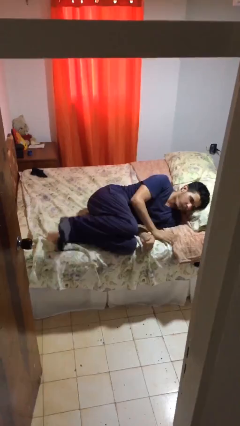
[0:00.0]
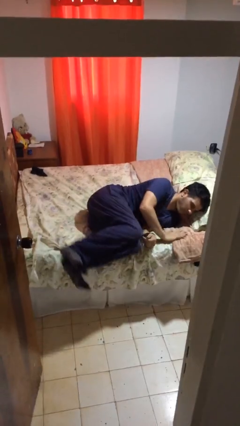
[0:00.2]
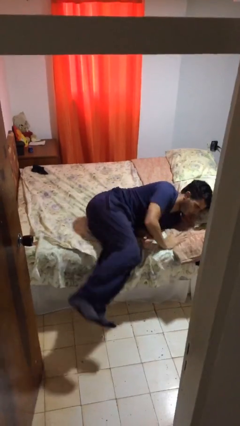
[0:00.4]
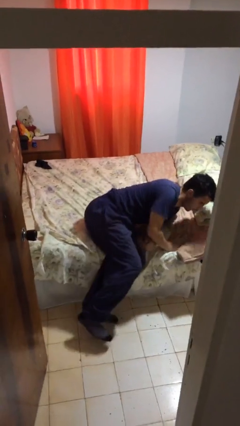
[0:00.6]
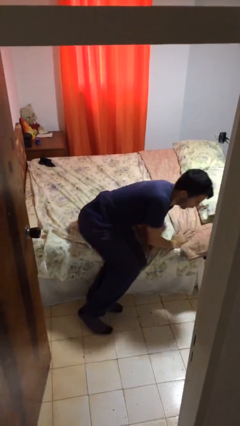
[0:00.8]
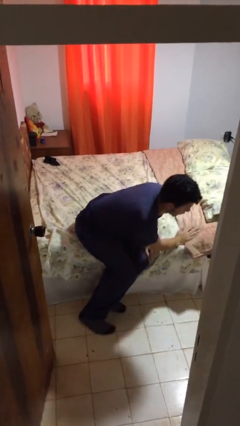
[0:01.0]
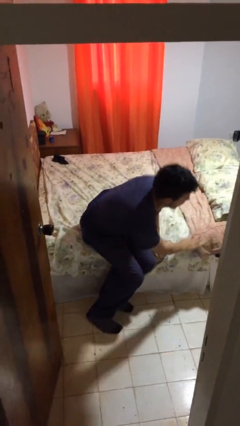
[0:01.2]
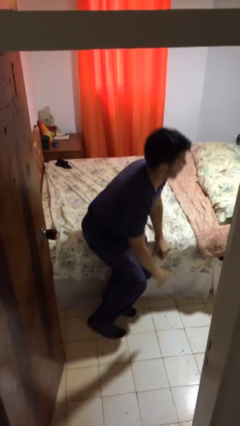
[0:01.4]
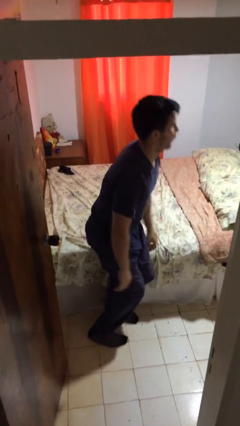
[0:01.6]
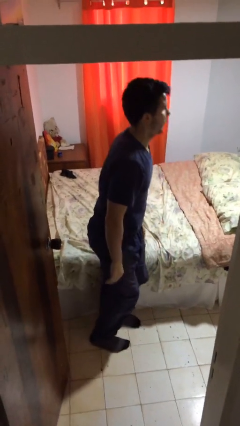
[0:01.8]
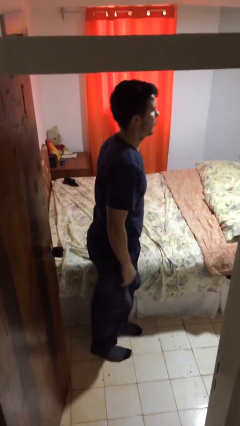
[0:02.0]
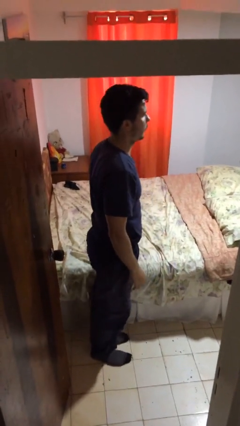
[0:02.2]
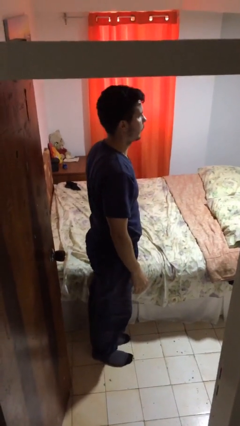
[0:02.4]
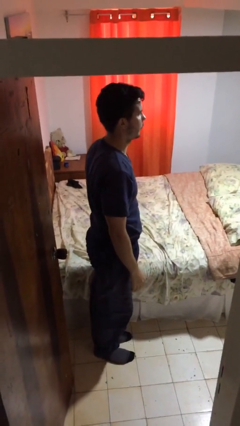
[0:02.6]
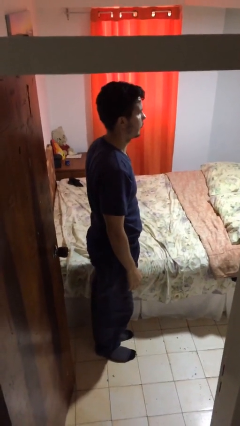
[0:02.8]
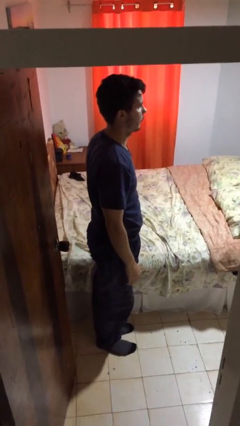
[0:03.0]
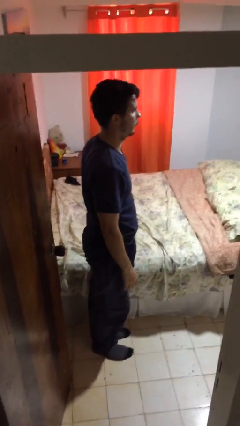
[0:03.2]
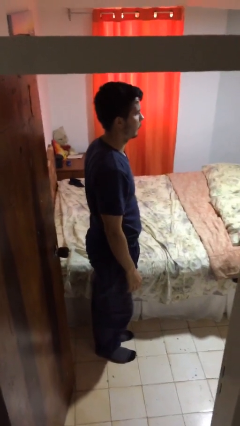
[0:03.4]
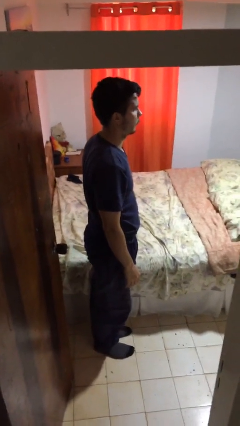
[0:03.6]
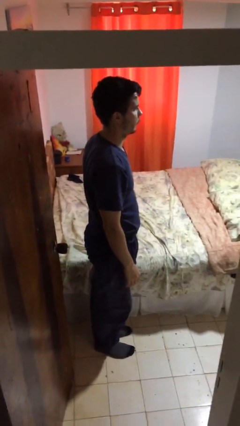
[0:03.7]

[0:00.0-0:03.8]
person stands up

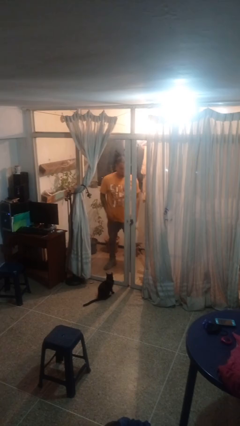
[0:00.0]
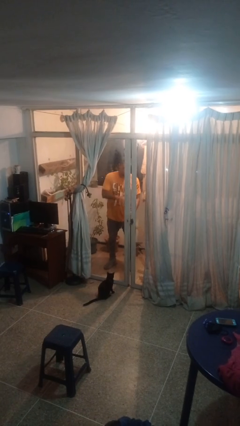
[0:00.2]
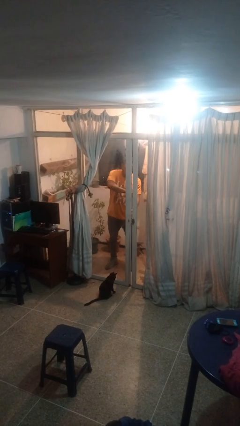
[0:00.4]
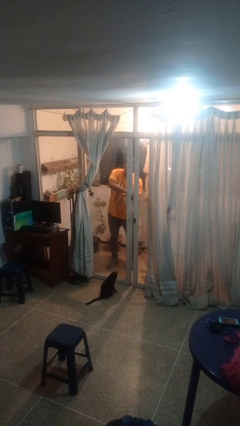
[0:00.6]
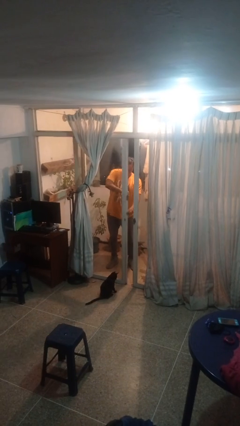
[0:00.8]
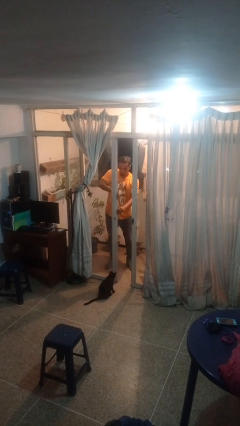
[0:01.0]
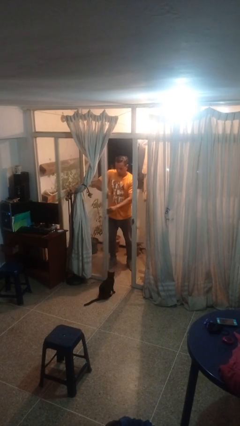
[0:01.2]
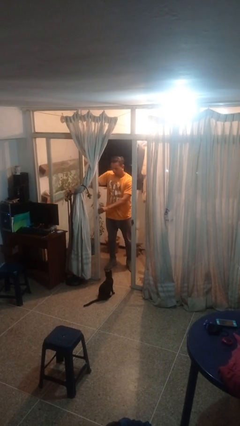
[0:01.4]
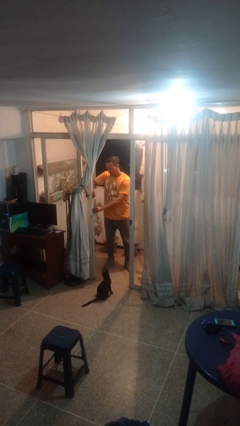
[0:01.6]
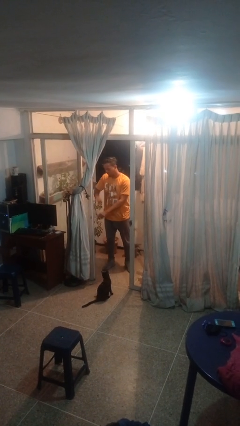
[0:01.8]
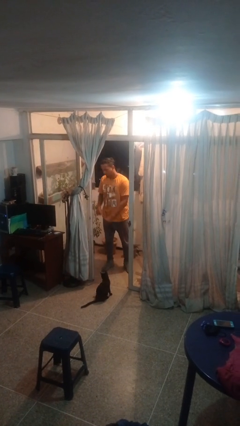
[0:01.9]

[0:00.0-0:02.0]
person opens sliding door

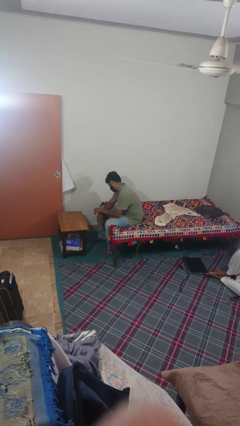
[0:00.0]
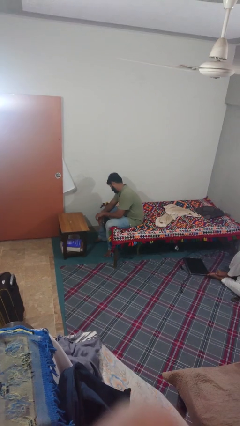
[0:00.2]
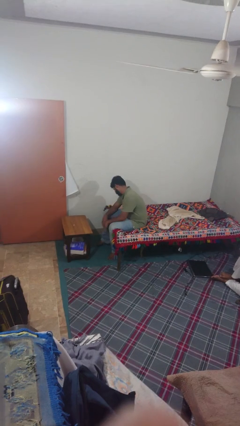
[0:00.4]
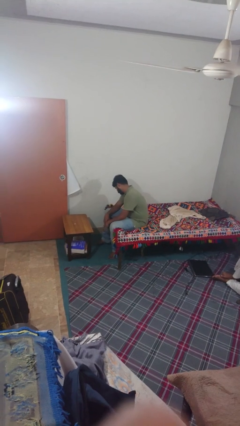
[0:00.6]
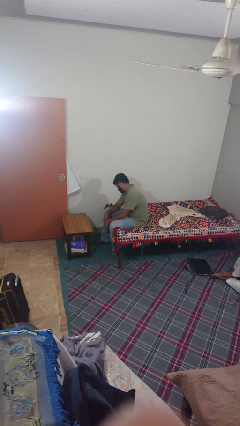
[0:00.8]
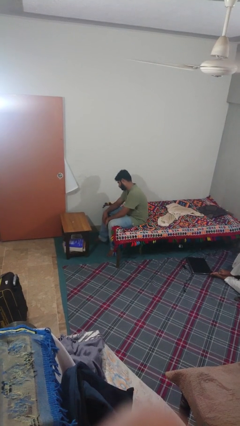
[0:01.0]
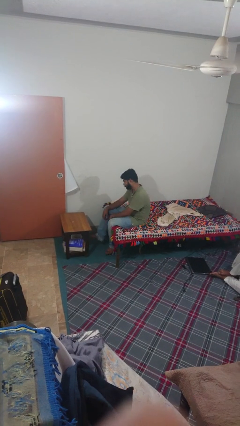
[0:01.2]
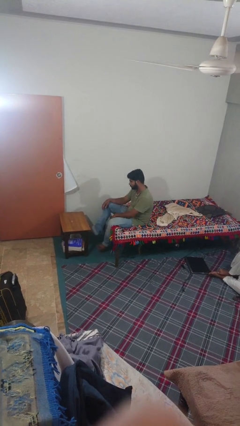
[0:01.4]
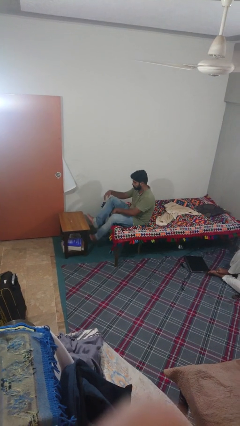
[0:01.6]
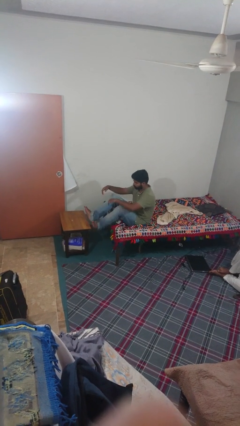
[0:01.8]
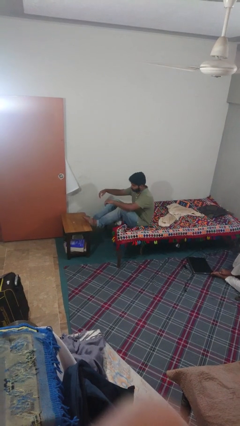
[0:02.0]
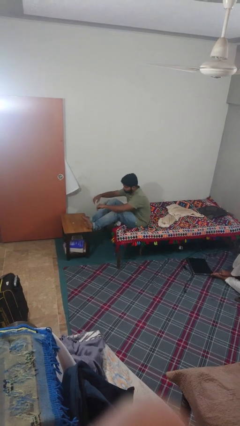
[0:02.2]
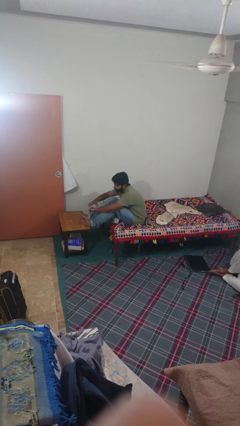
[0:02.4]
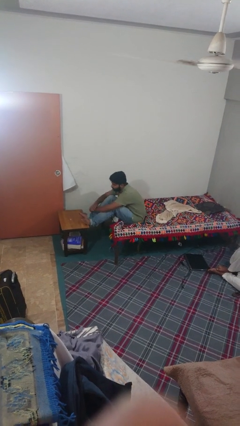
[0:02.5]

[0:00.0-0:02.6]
person puts feet up

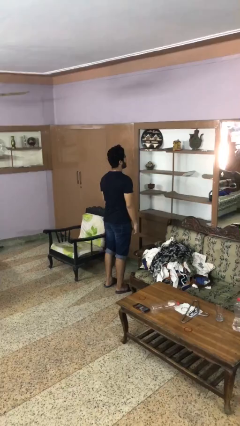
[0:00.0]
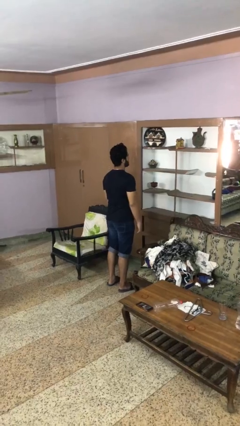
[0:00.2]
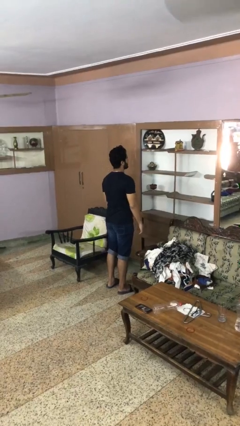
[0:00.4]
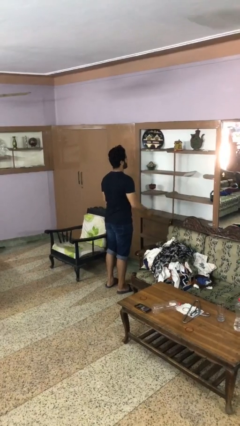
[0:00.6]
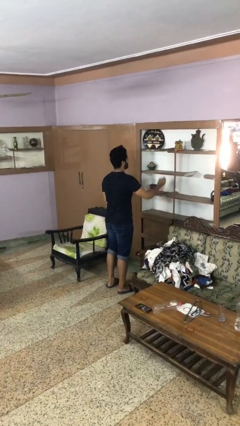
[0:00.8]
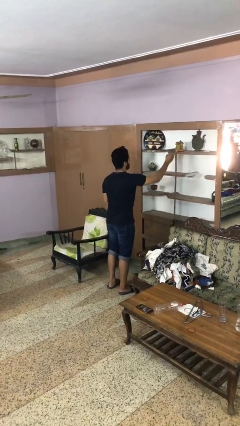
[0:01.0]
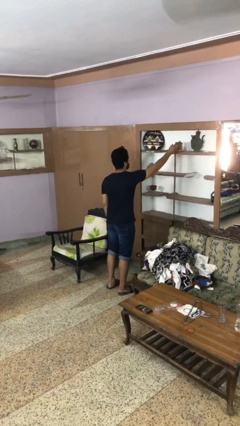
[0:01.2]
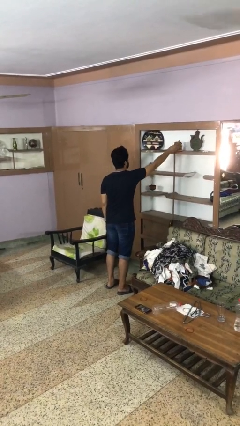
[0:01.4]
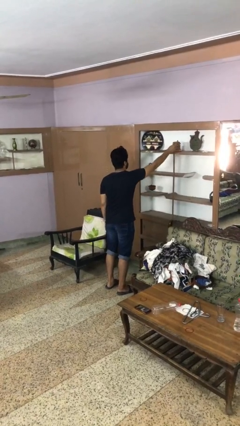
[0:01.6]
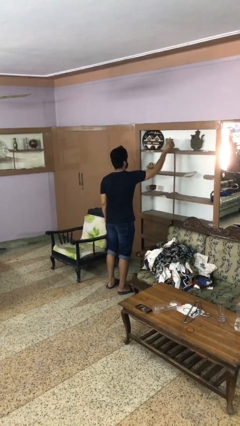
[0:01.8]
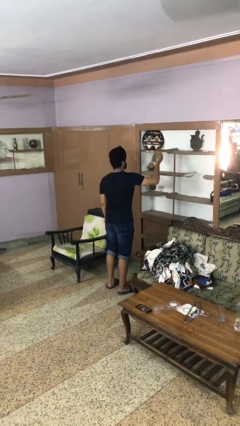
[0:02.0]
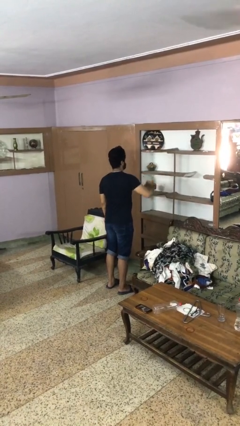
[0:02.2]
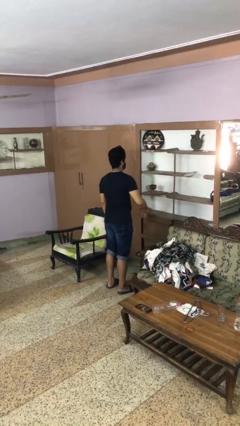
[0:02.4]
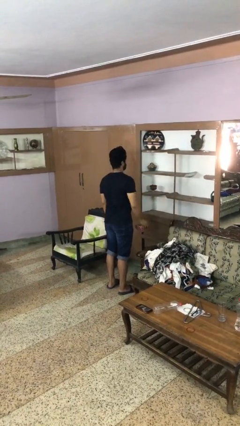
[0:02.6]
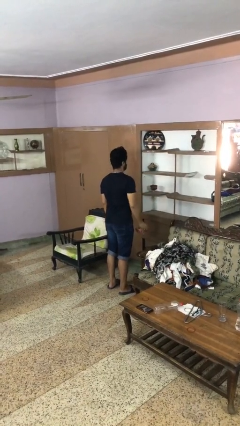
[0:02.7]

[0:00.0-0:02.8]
person picks up object from shelf

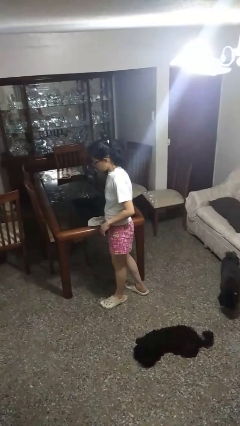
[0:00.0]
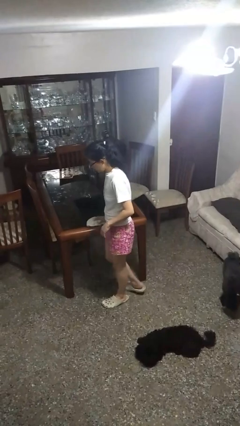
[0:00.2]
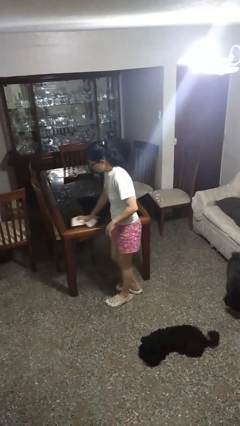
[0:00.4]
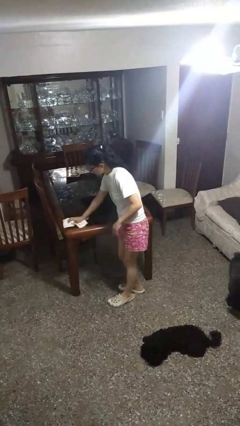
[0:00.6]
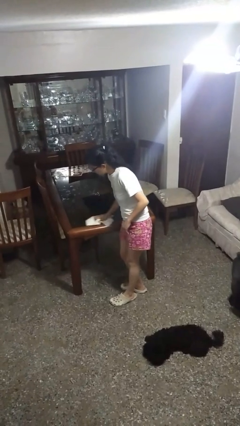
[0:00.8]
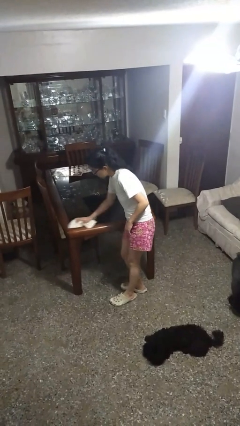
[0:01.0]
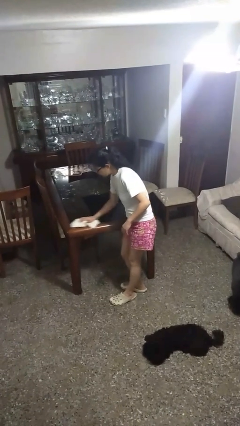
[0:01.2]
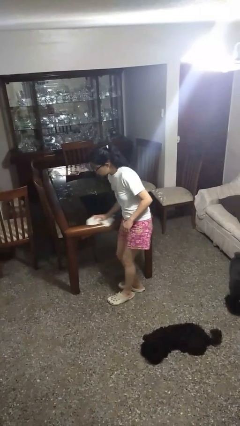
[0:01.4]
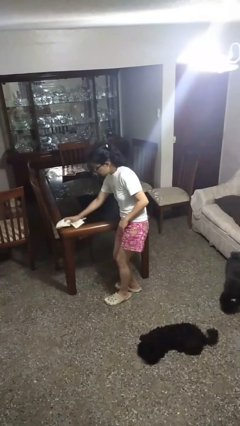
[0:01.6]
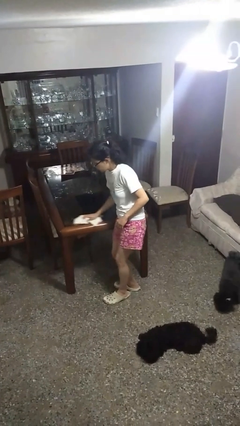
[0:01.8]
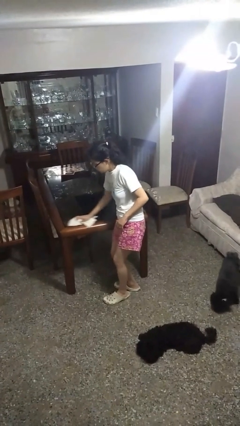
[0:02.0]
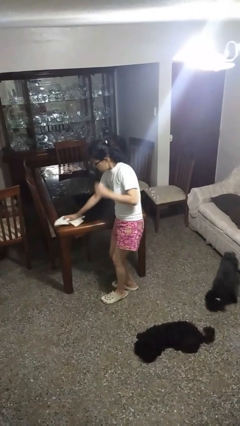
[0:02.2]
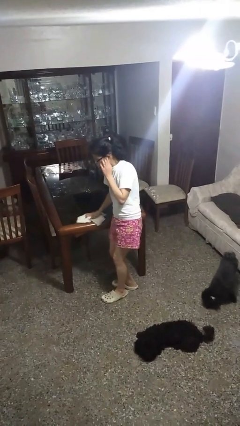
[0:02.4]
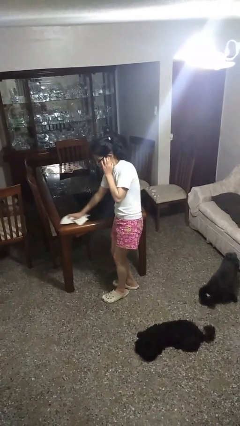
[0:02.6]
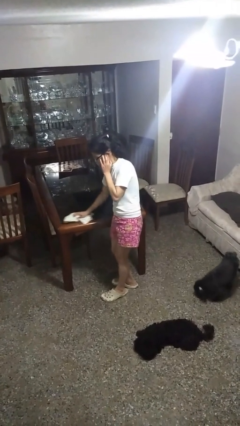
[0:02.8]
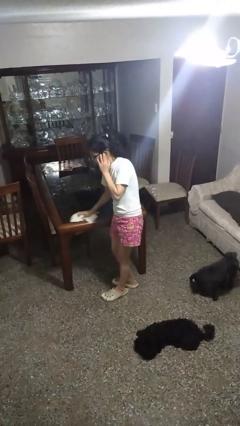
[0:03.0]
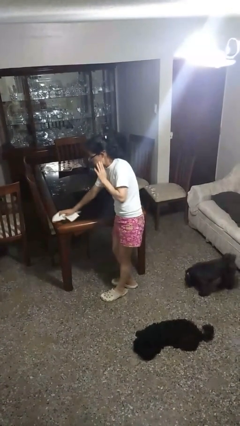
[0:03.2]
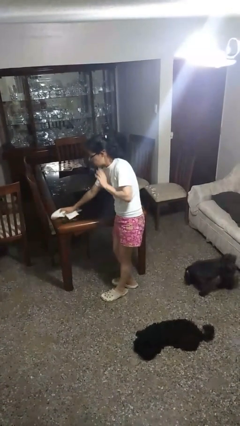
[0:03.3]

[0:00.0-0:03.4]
person cleans table with rag

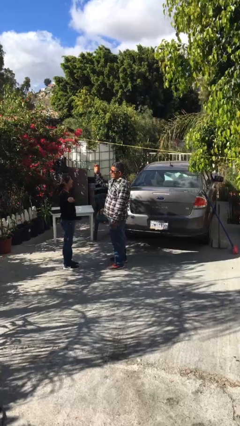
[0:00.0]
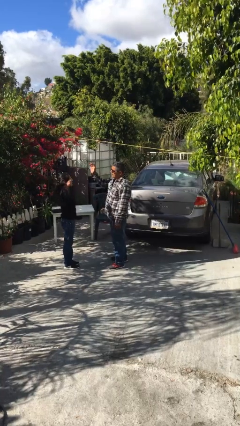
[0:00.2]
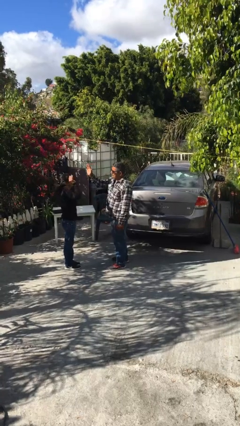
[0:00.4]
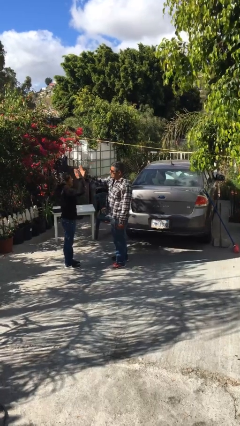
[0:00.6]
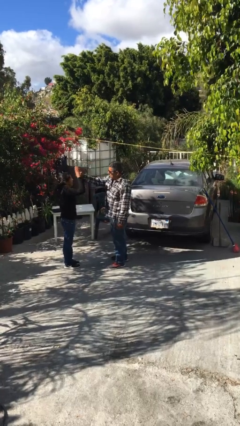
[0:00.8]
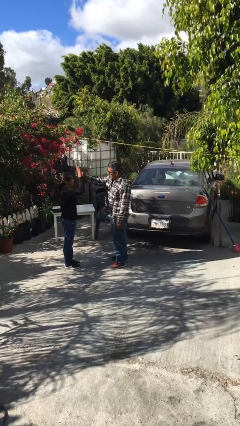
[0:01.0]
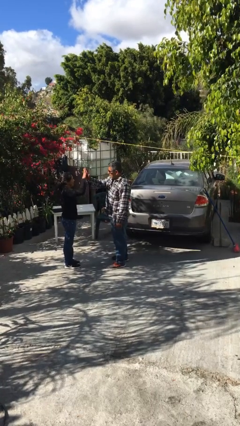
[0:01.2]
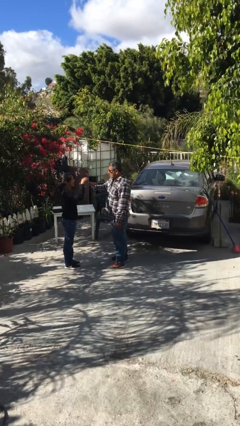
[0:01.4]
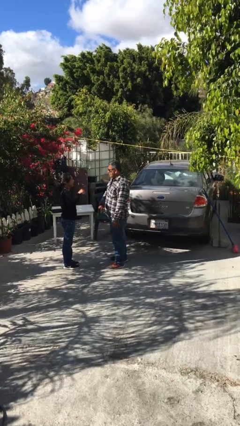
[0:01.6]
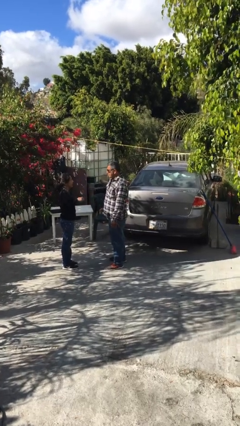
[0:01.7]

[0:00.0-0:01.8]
person highfives hand

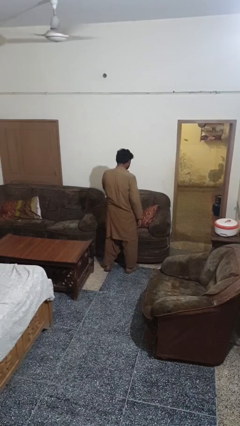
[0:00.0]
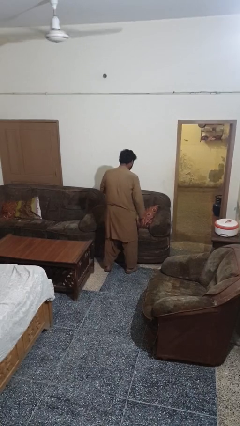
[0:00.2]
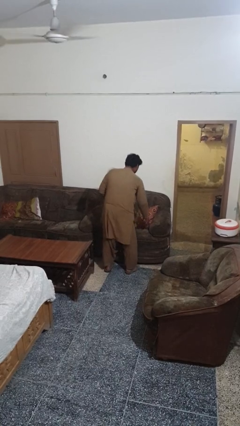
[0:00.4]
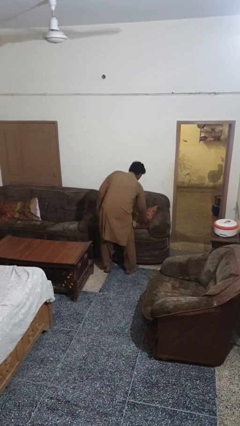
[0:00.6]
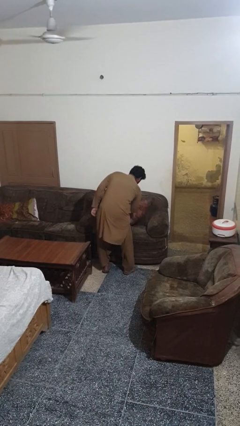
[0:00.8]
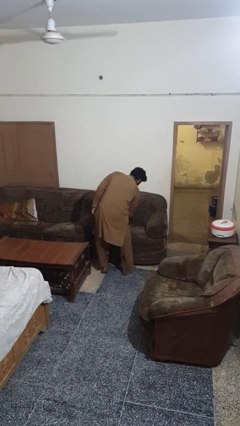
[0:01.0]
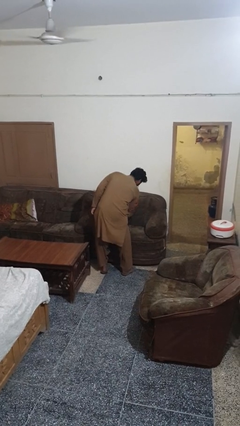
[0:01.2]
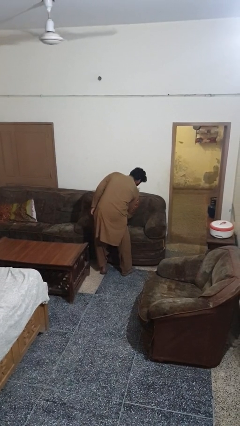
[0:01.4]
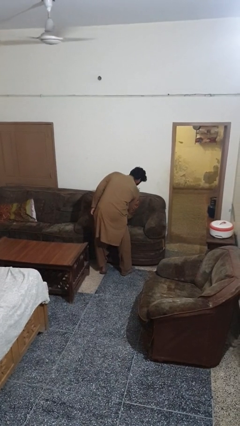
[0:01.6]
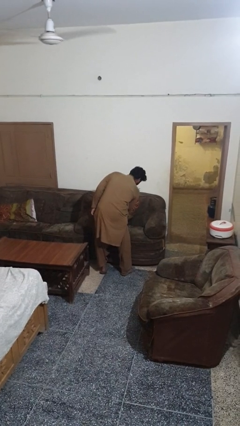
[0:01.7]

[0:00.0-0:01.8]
person searches in couch
